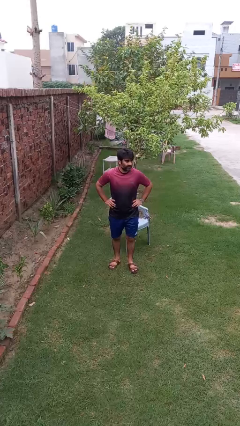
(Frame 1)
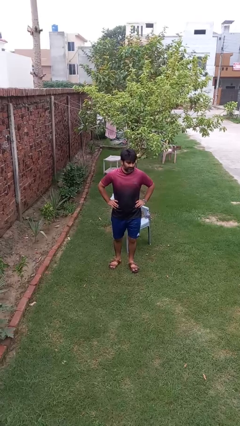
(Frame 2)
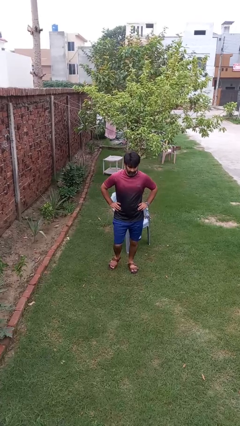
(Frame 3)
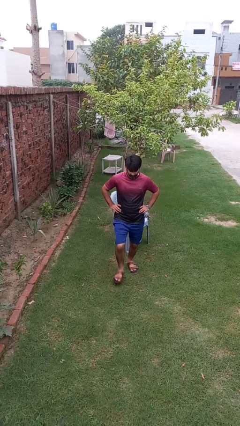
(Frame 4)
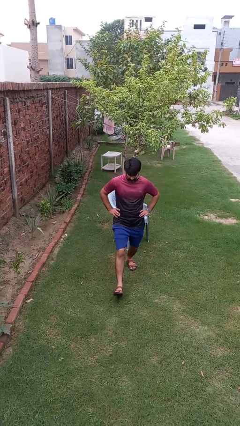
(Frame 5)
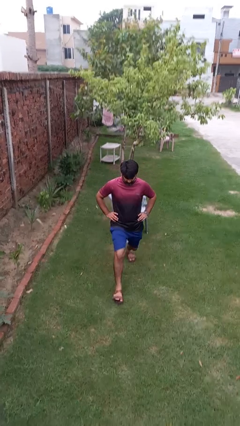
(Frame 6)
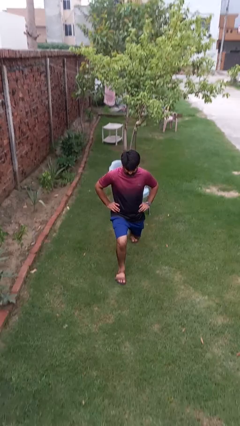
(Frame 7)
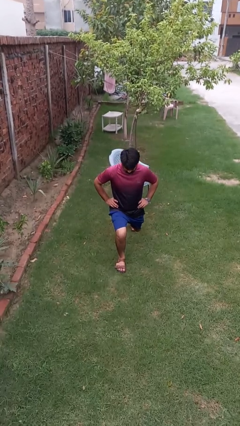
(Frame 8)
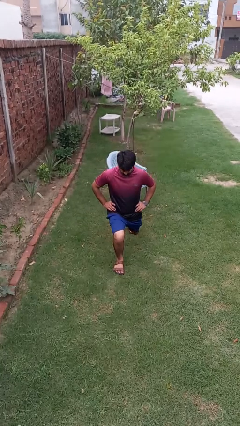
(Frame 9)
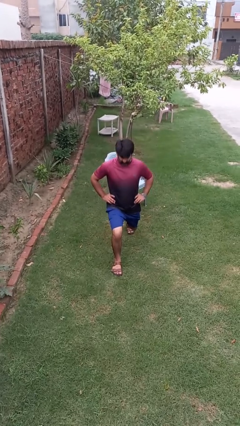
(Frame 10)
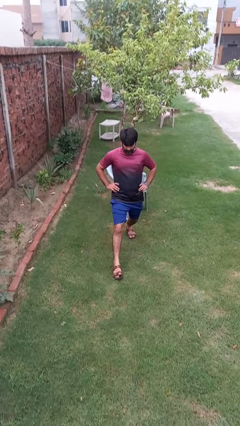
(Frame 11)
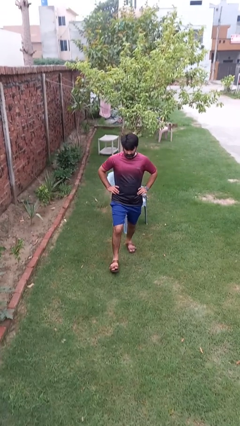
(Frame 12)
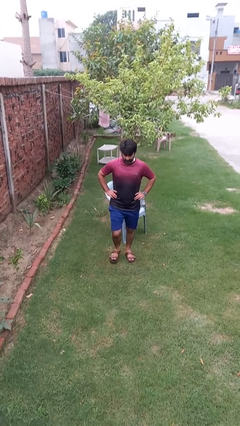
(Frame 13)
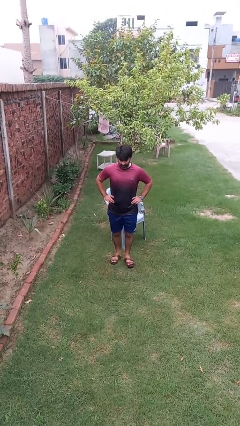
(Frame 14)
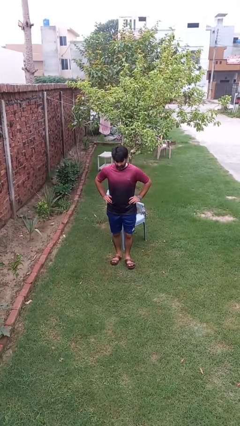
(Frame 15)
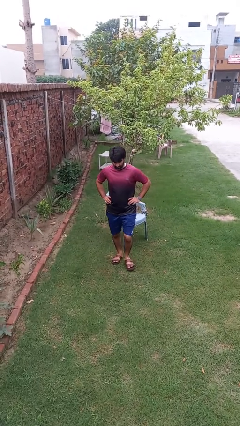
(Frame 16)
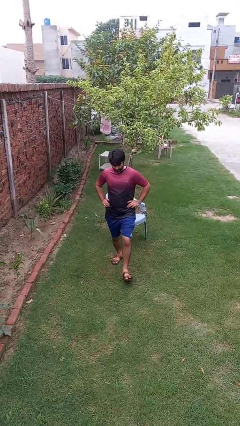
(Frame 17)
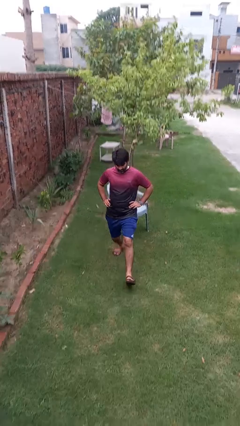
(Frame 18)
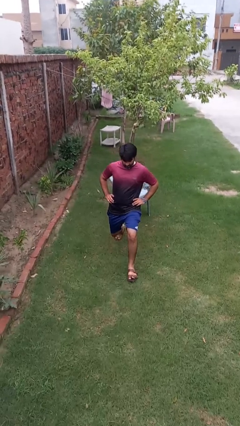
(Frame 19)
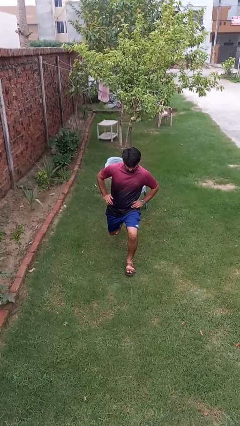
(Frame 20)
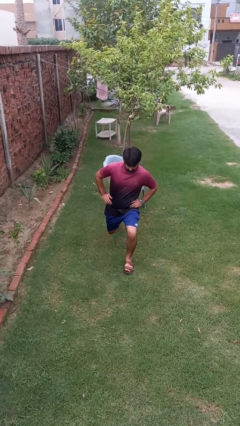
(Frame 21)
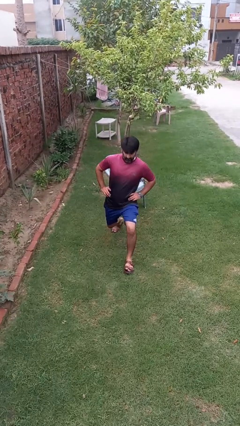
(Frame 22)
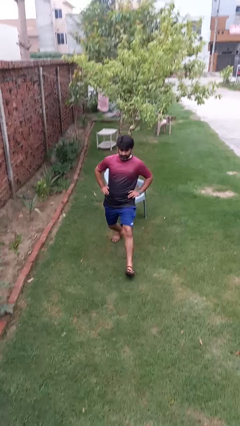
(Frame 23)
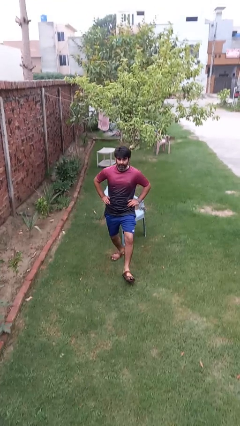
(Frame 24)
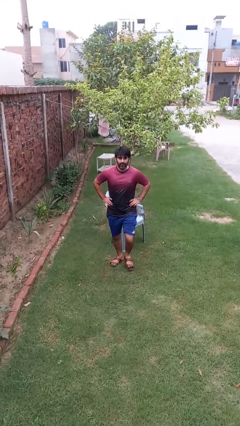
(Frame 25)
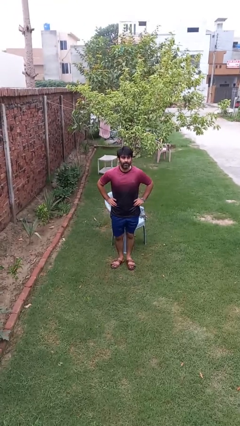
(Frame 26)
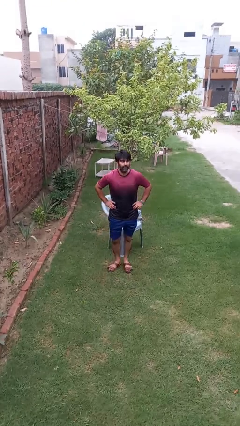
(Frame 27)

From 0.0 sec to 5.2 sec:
person exercises with lunges

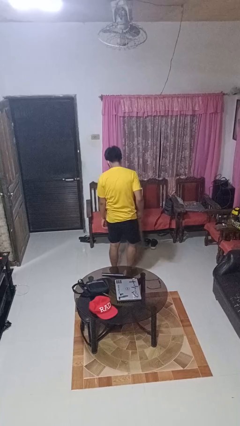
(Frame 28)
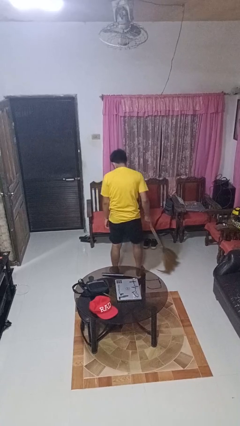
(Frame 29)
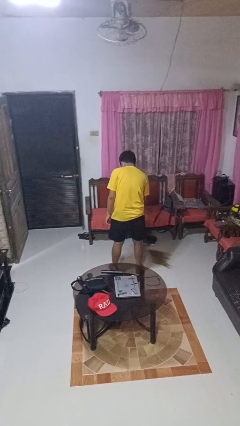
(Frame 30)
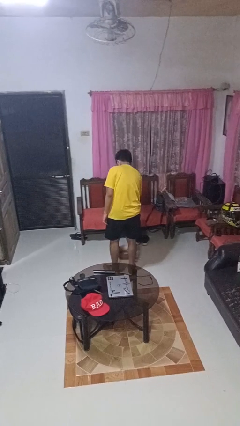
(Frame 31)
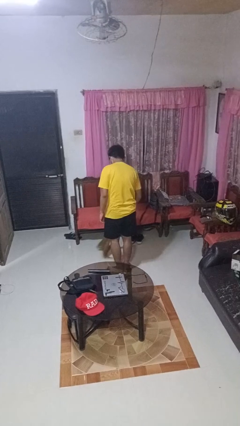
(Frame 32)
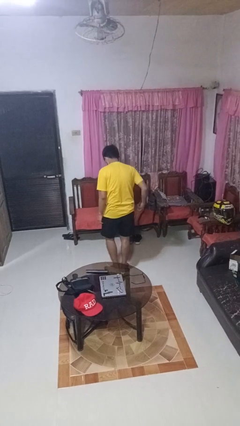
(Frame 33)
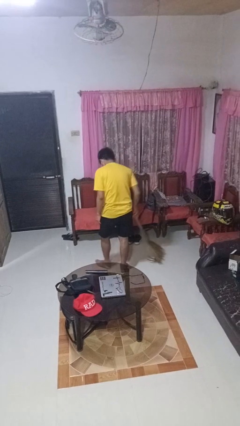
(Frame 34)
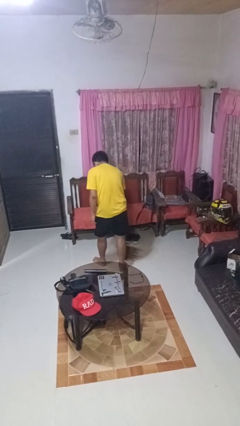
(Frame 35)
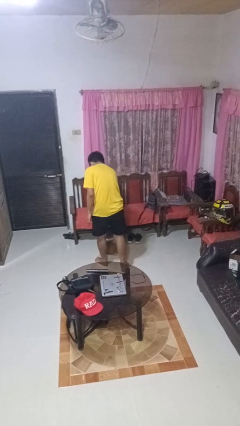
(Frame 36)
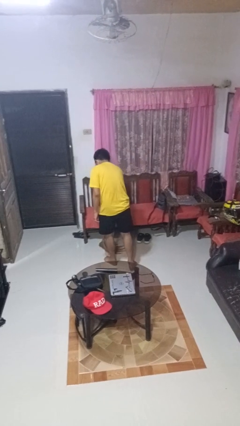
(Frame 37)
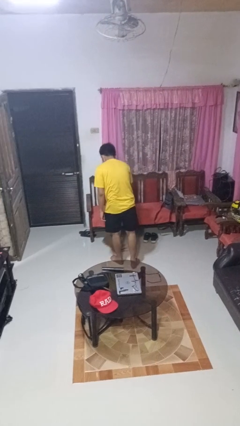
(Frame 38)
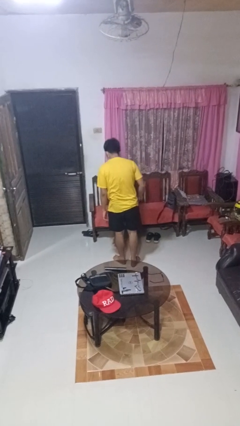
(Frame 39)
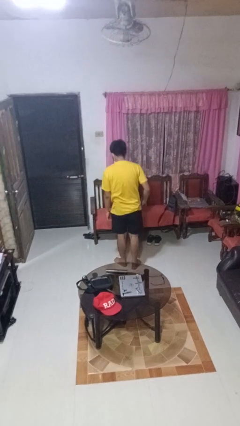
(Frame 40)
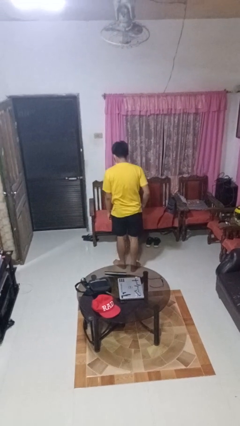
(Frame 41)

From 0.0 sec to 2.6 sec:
person sweeps floor

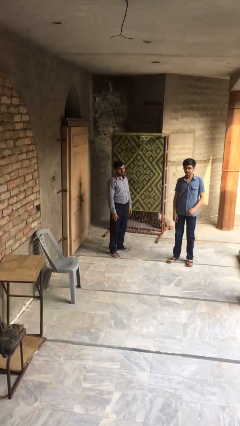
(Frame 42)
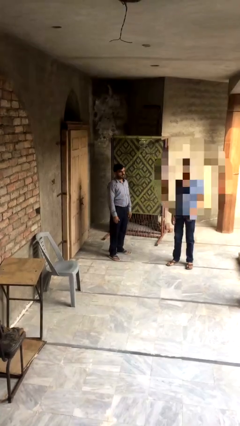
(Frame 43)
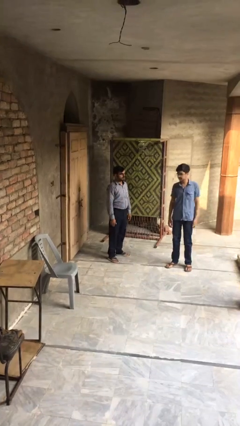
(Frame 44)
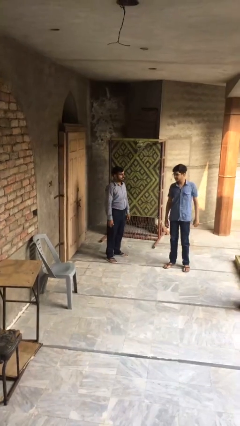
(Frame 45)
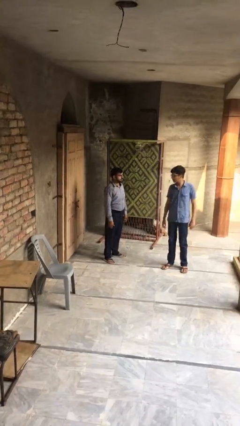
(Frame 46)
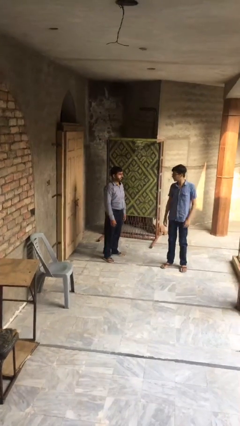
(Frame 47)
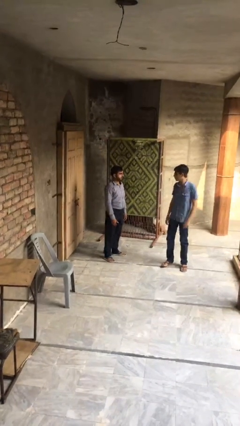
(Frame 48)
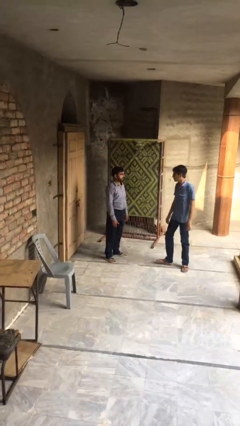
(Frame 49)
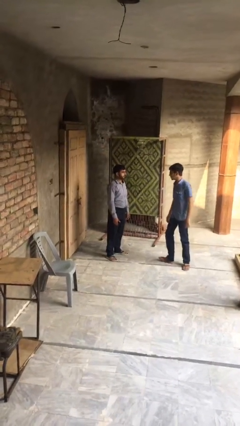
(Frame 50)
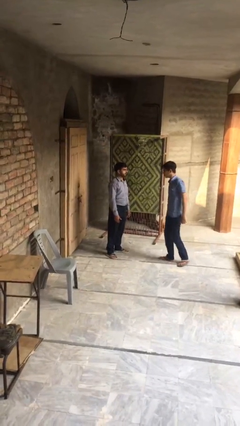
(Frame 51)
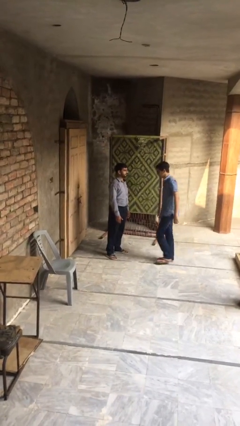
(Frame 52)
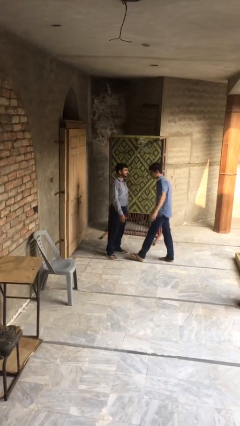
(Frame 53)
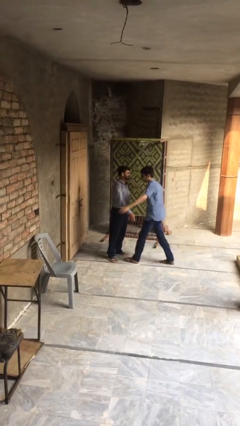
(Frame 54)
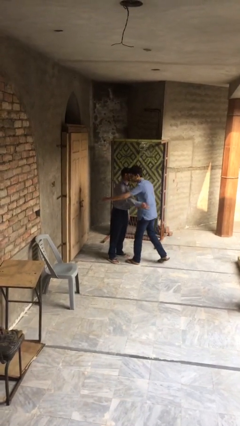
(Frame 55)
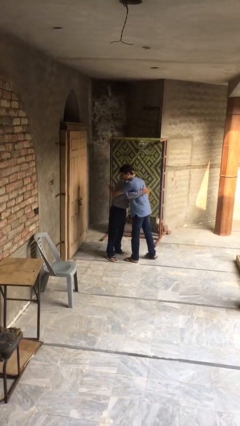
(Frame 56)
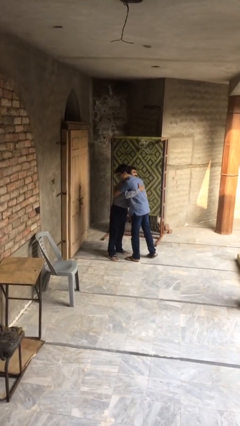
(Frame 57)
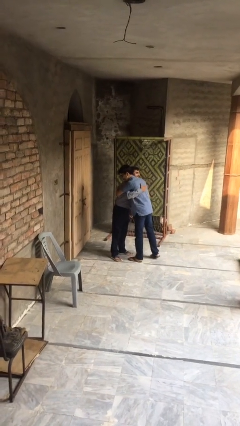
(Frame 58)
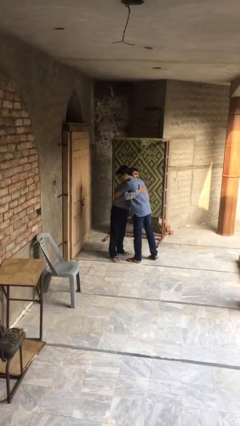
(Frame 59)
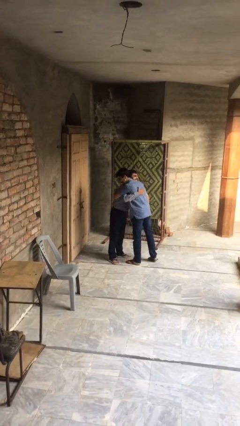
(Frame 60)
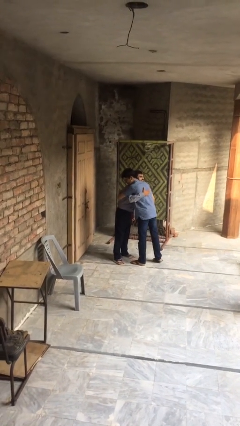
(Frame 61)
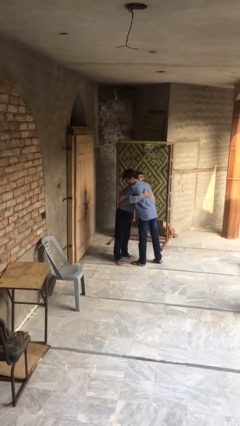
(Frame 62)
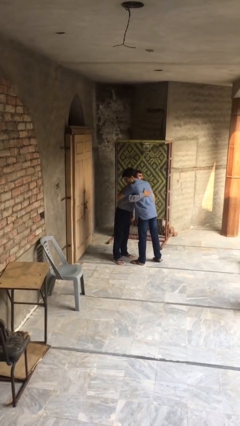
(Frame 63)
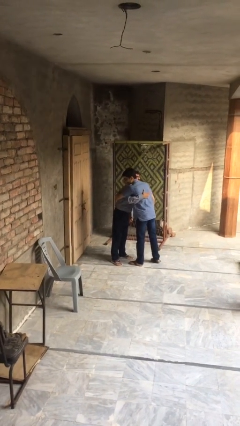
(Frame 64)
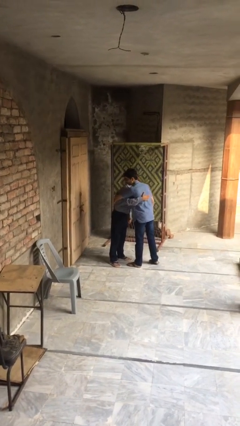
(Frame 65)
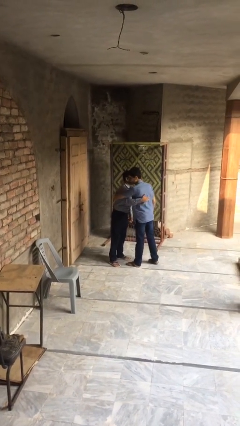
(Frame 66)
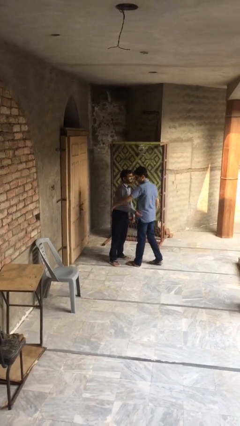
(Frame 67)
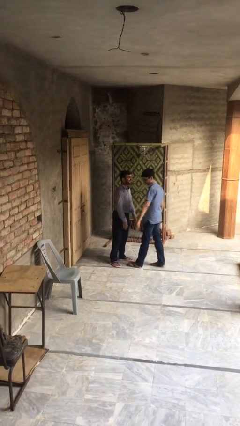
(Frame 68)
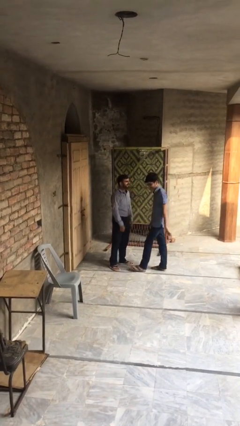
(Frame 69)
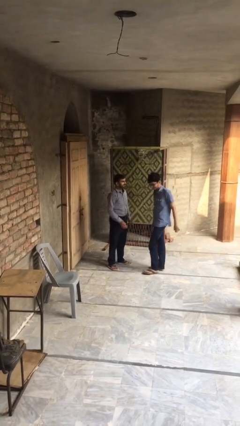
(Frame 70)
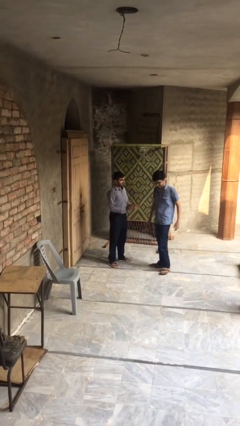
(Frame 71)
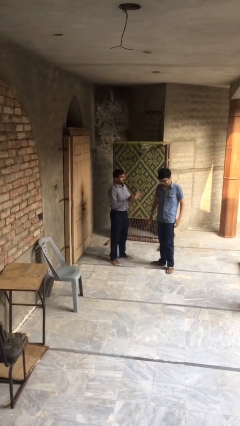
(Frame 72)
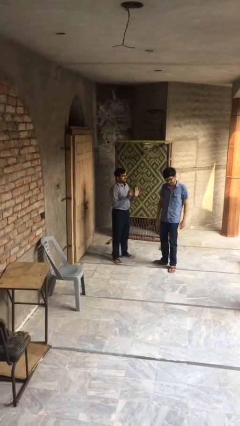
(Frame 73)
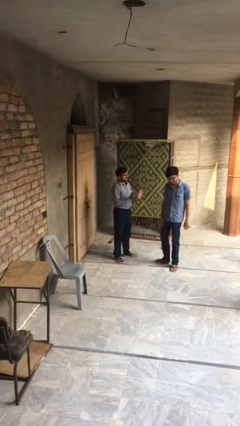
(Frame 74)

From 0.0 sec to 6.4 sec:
person embraces person

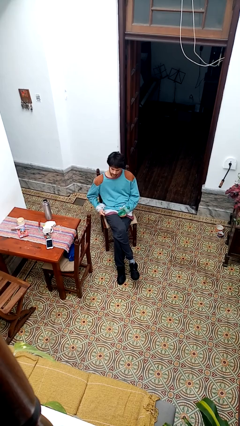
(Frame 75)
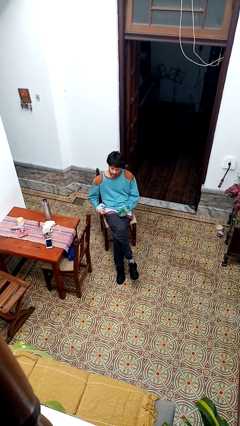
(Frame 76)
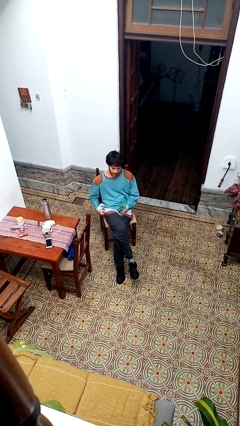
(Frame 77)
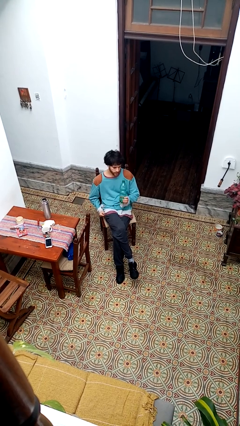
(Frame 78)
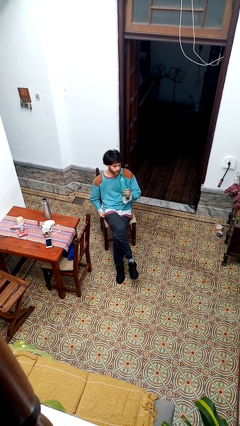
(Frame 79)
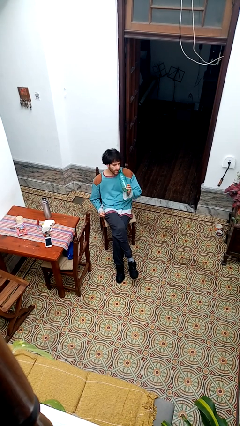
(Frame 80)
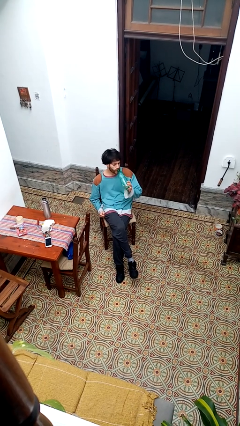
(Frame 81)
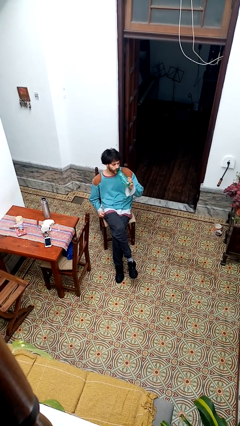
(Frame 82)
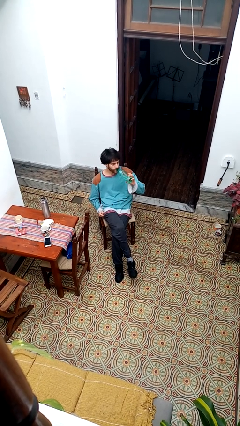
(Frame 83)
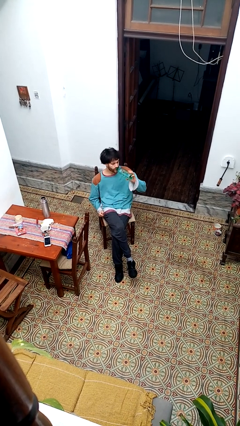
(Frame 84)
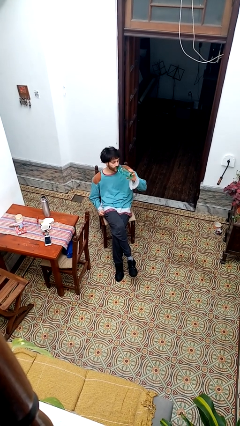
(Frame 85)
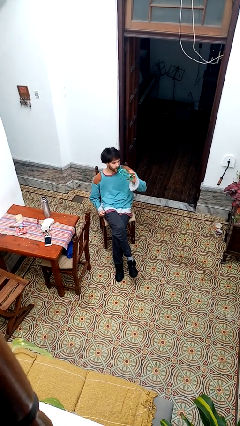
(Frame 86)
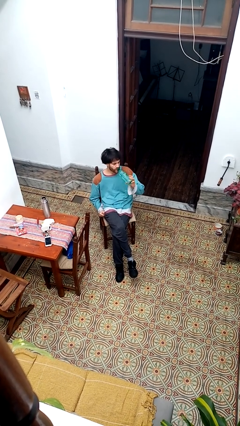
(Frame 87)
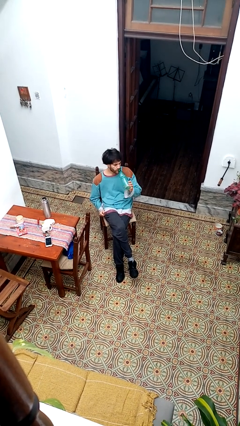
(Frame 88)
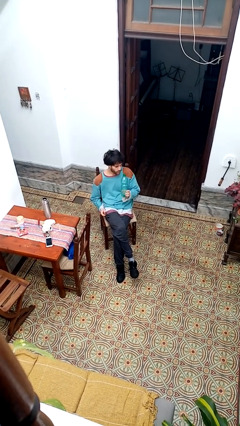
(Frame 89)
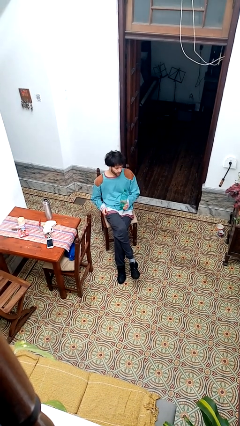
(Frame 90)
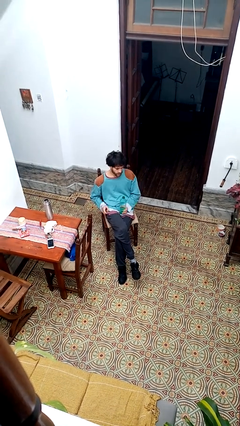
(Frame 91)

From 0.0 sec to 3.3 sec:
person drinks from bottle

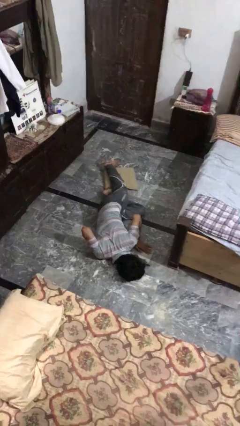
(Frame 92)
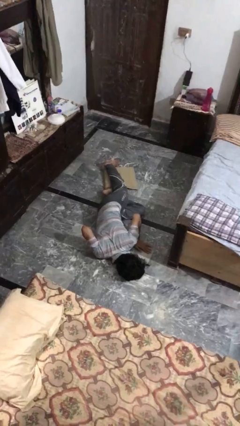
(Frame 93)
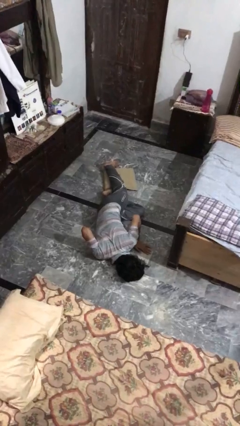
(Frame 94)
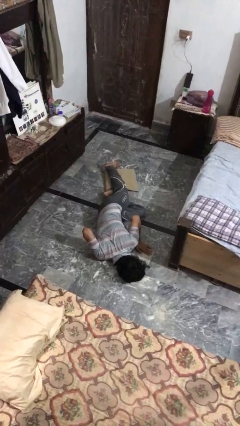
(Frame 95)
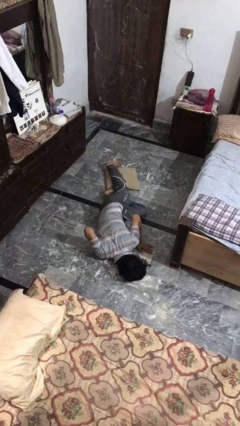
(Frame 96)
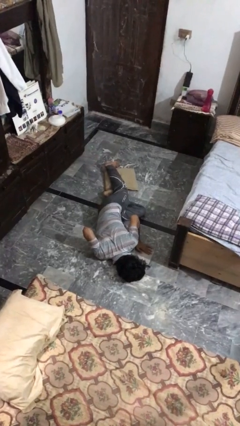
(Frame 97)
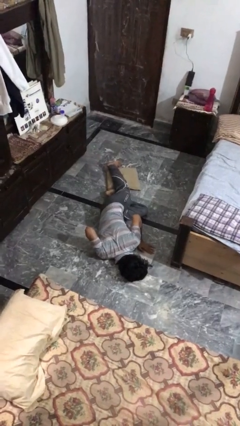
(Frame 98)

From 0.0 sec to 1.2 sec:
person lies down on floor
